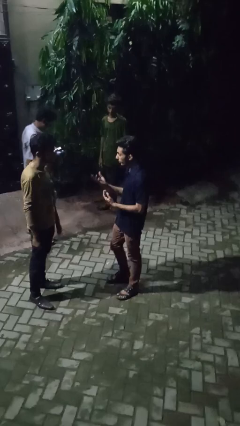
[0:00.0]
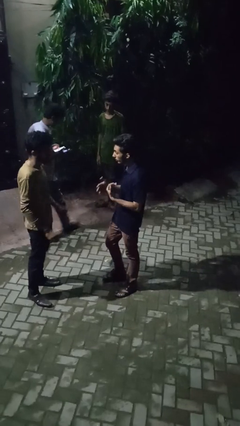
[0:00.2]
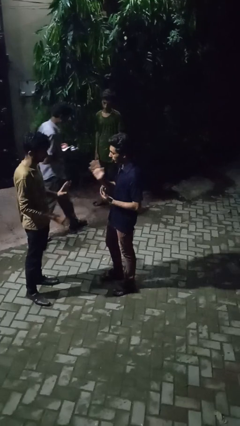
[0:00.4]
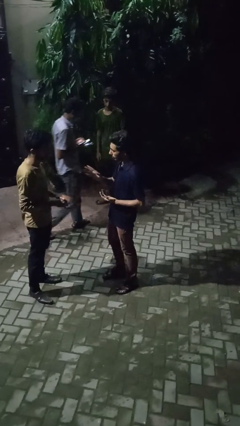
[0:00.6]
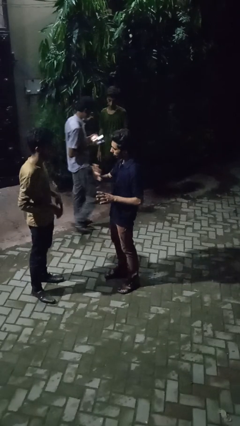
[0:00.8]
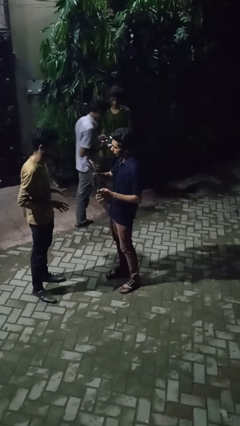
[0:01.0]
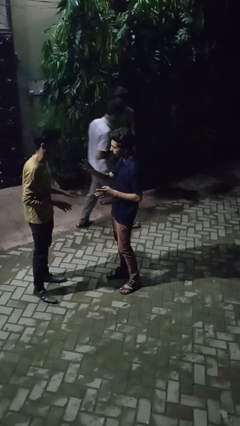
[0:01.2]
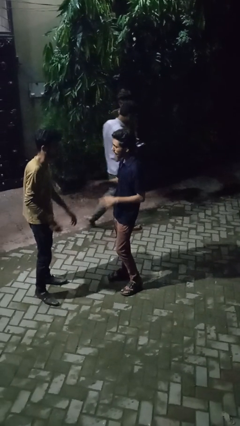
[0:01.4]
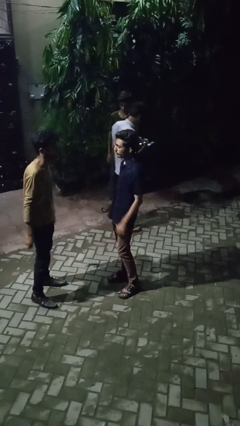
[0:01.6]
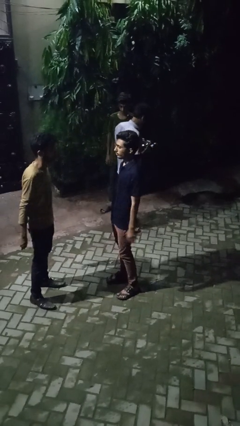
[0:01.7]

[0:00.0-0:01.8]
person talks to person

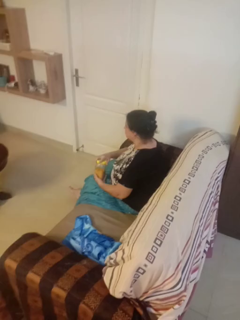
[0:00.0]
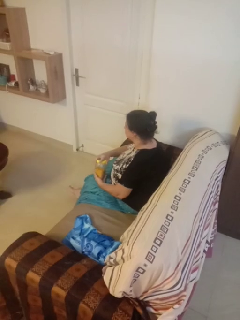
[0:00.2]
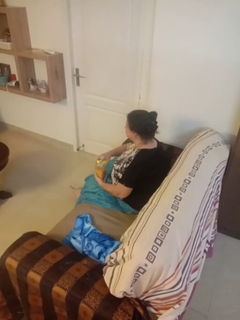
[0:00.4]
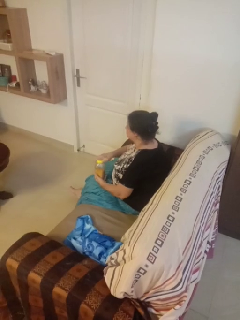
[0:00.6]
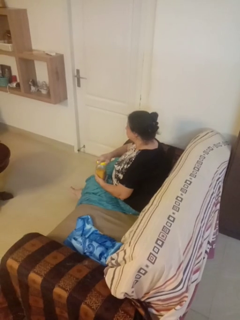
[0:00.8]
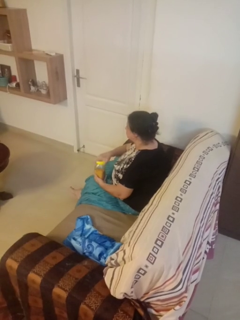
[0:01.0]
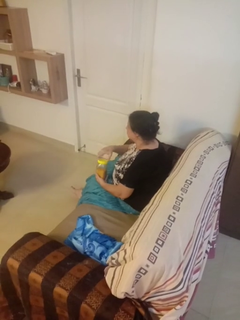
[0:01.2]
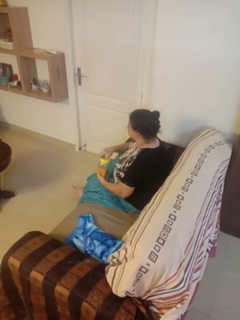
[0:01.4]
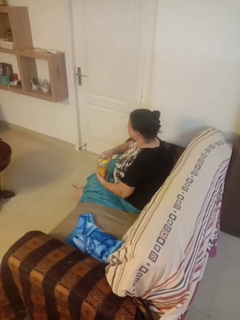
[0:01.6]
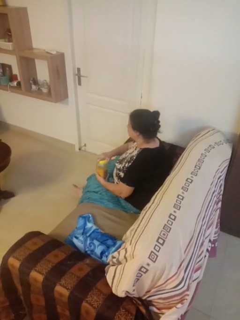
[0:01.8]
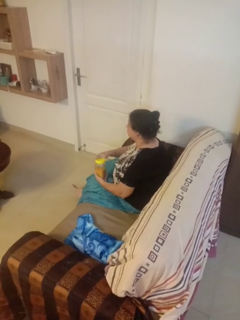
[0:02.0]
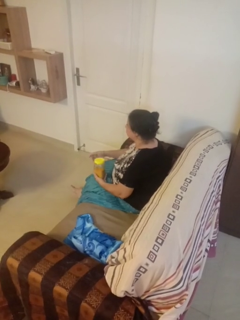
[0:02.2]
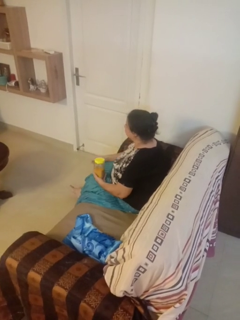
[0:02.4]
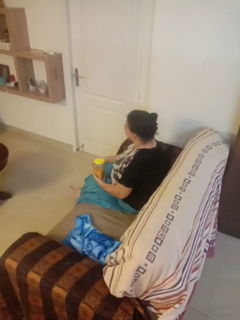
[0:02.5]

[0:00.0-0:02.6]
person closes jar

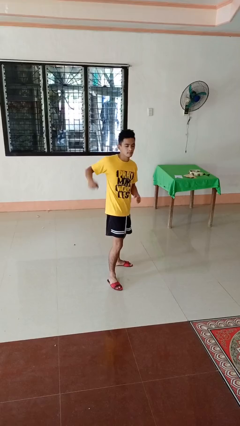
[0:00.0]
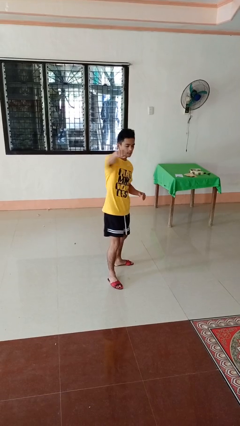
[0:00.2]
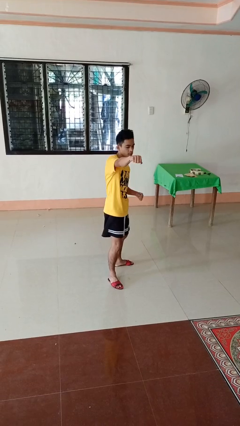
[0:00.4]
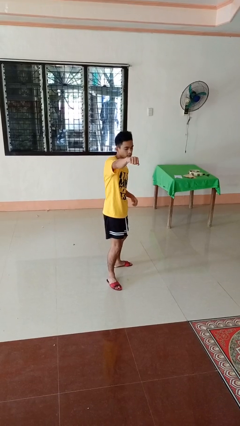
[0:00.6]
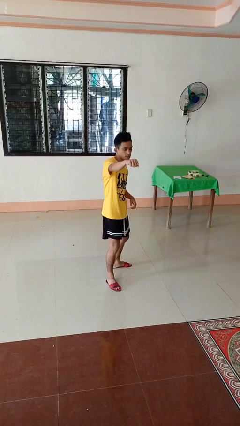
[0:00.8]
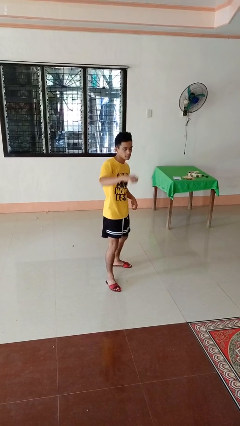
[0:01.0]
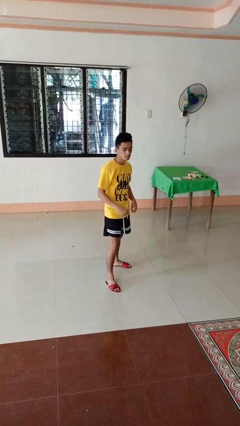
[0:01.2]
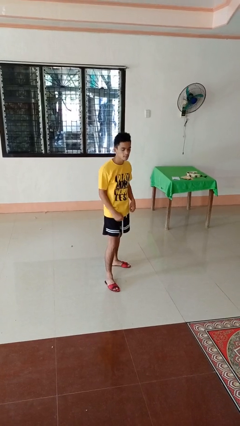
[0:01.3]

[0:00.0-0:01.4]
person punches

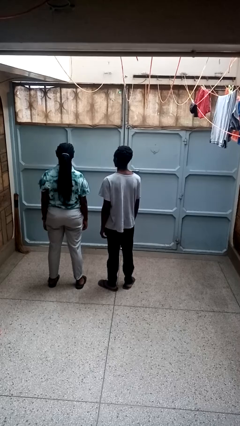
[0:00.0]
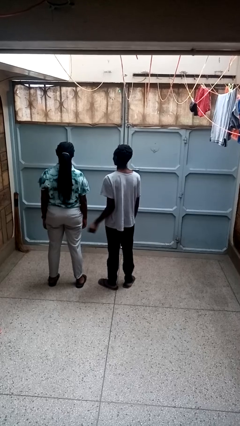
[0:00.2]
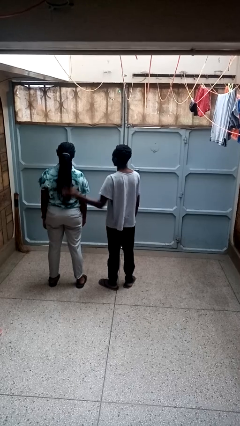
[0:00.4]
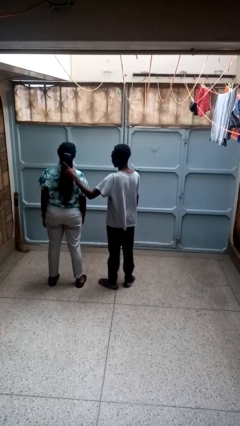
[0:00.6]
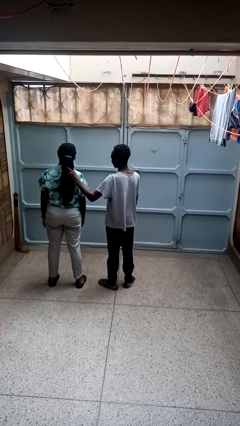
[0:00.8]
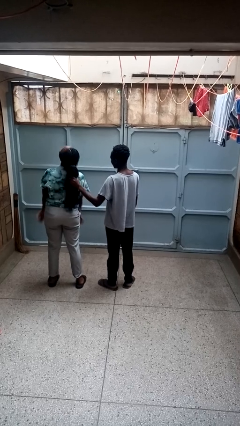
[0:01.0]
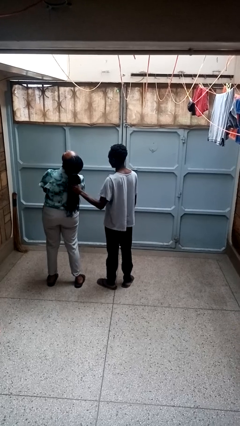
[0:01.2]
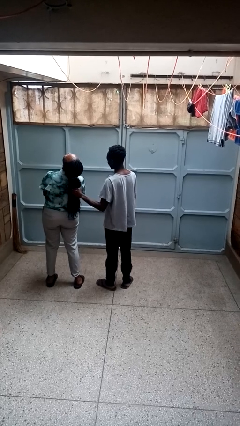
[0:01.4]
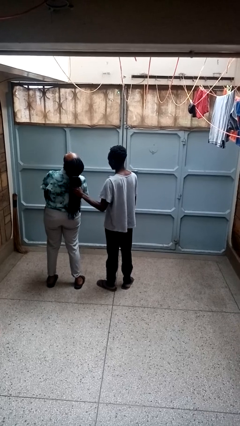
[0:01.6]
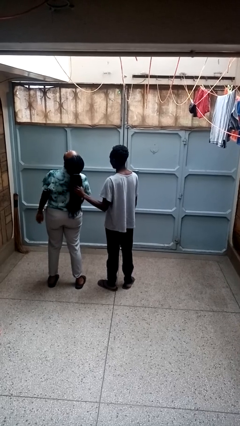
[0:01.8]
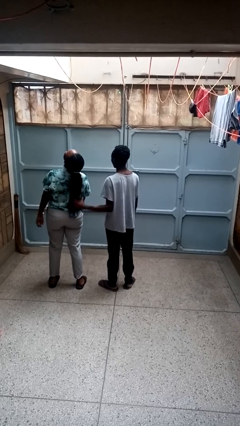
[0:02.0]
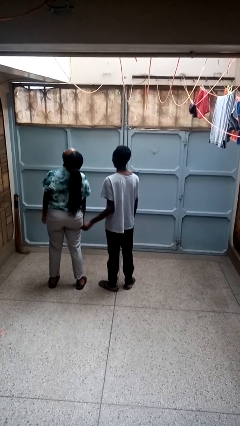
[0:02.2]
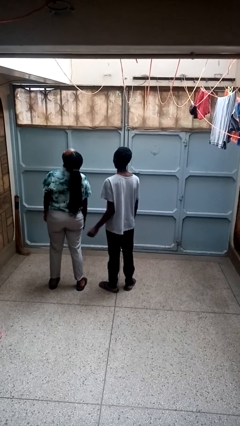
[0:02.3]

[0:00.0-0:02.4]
person grabs person by hair

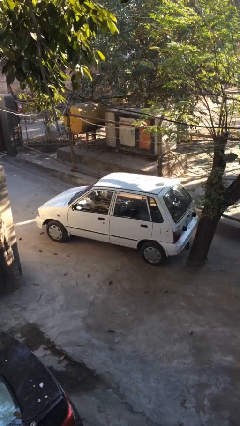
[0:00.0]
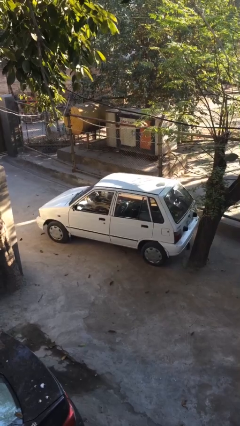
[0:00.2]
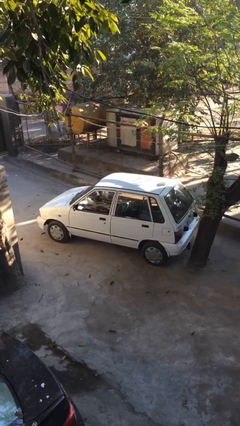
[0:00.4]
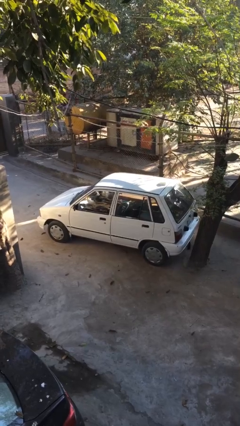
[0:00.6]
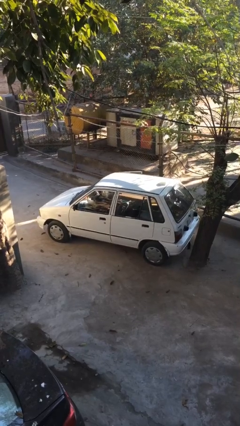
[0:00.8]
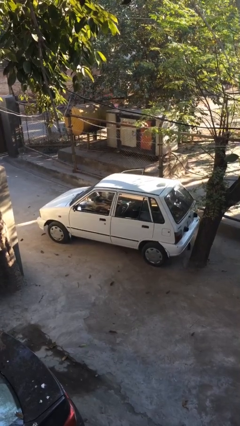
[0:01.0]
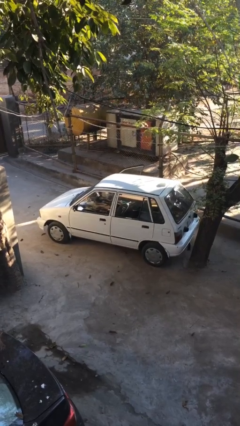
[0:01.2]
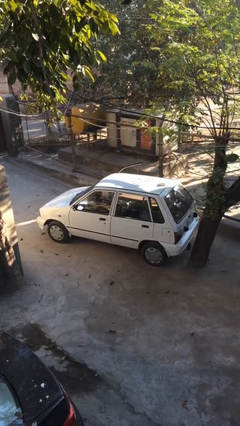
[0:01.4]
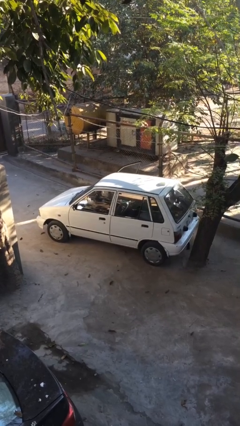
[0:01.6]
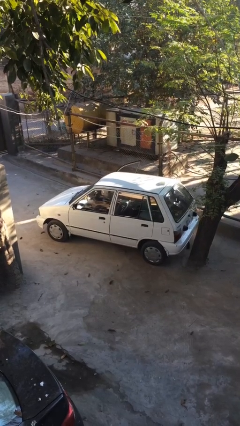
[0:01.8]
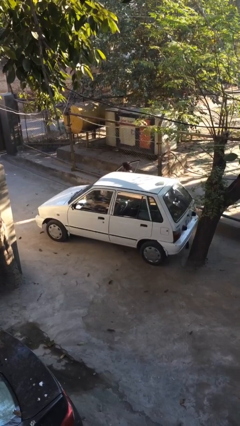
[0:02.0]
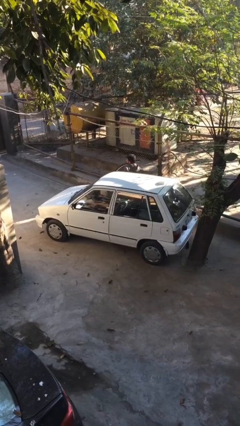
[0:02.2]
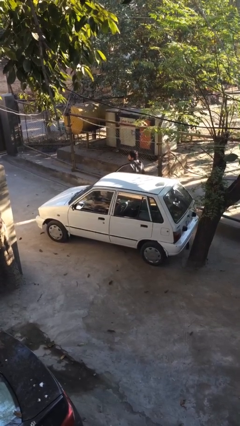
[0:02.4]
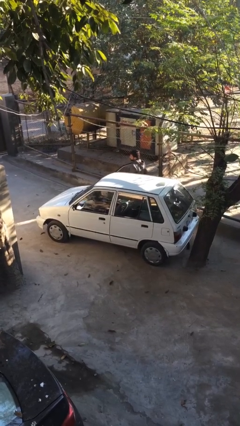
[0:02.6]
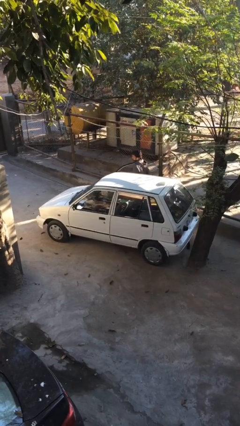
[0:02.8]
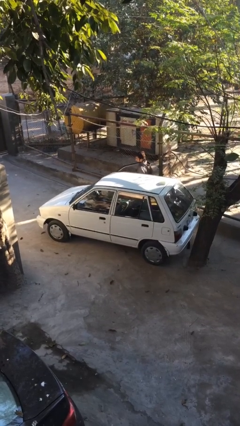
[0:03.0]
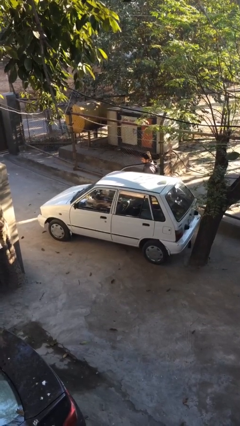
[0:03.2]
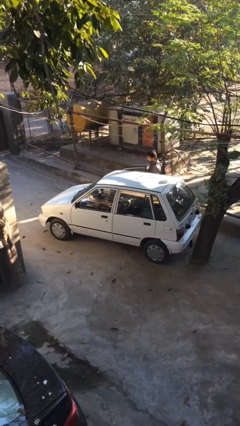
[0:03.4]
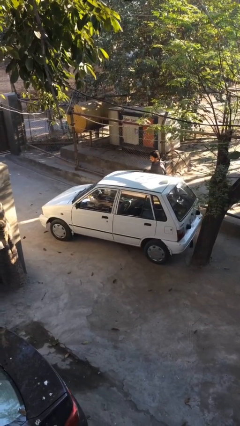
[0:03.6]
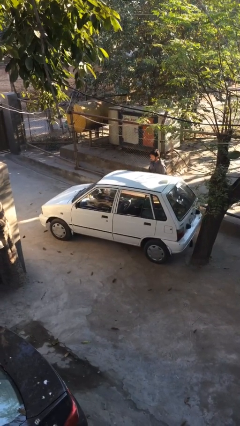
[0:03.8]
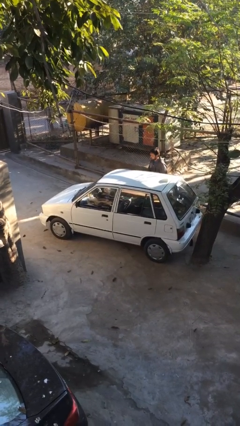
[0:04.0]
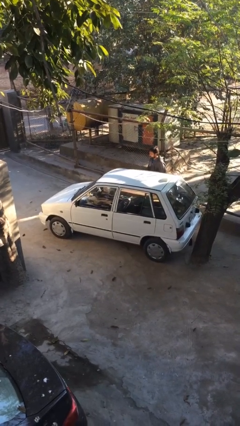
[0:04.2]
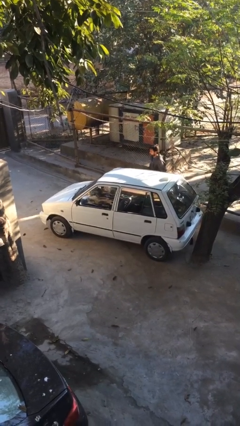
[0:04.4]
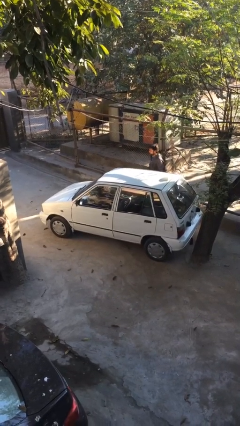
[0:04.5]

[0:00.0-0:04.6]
car drops off person

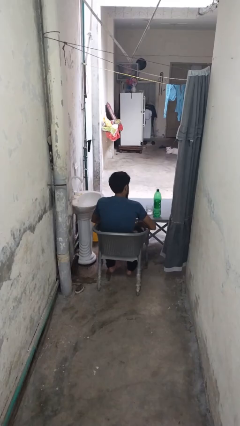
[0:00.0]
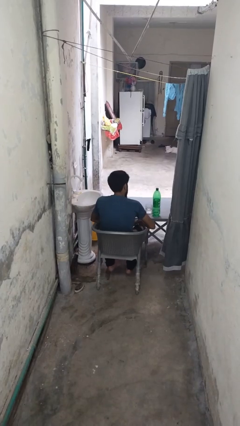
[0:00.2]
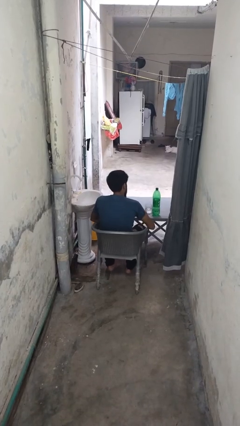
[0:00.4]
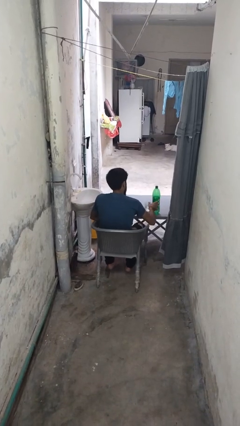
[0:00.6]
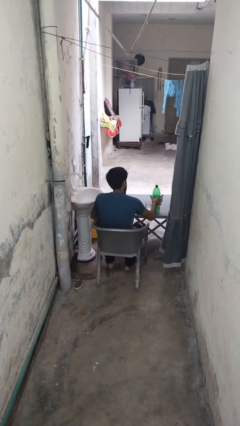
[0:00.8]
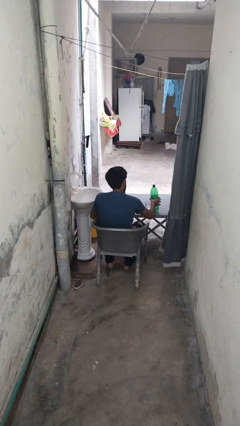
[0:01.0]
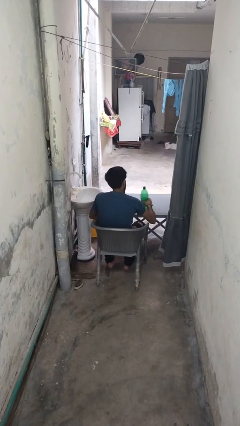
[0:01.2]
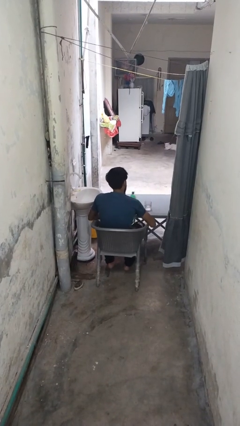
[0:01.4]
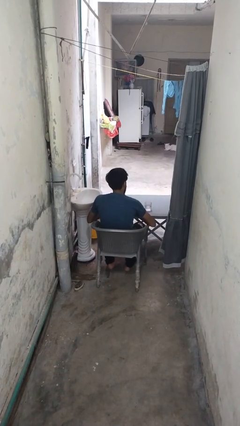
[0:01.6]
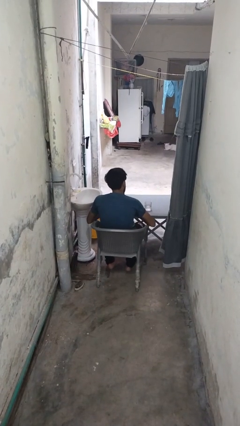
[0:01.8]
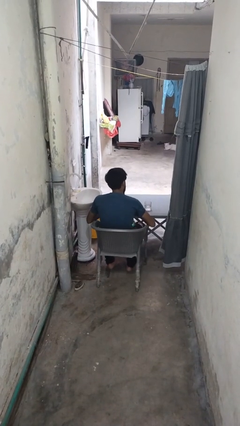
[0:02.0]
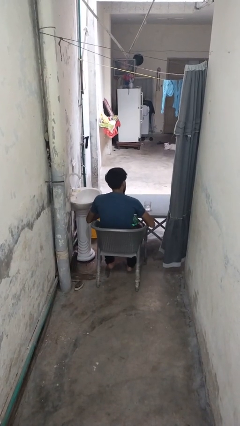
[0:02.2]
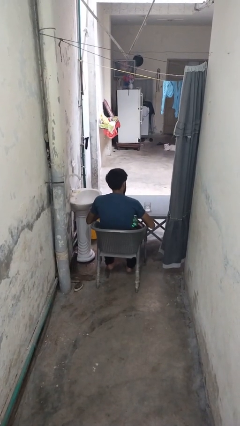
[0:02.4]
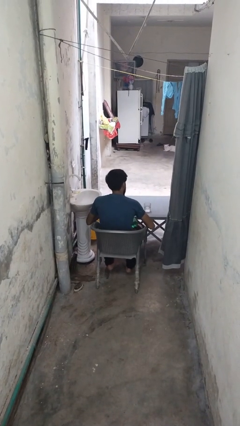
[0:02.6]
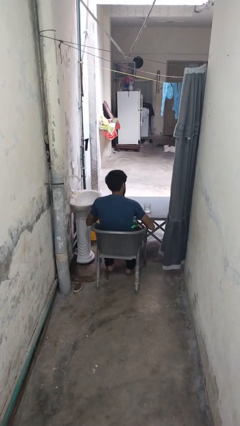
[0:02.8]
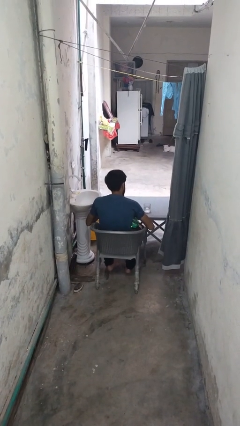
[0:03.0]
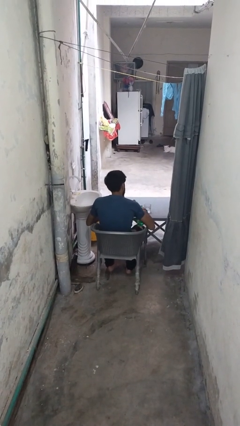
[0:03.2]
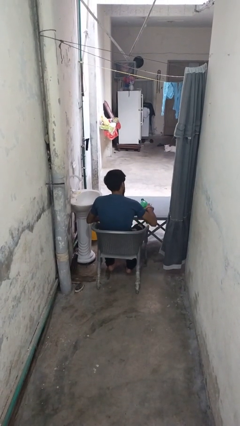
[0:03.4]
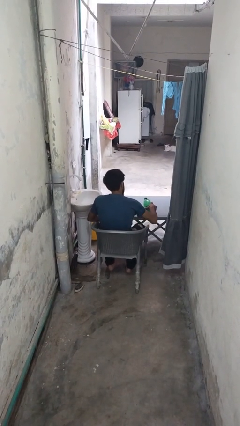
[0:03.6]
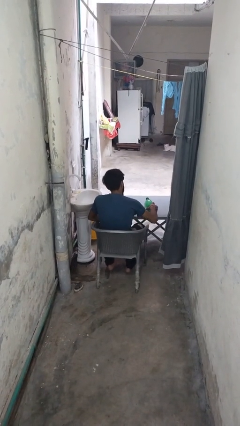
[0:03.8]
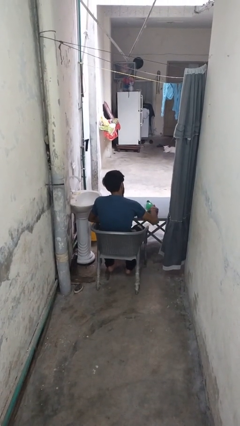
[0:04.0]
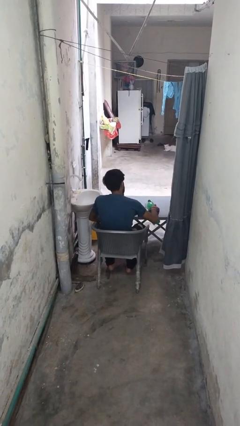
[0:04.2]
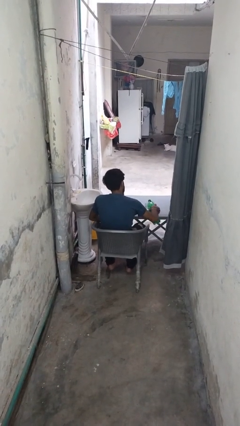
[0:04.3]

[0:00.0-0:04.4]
person unscrews lid from bottle

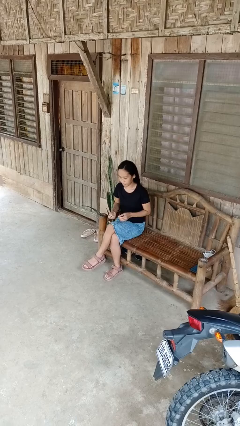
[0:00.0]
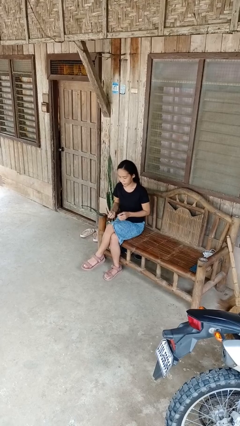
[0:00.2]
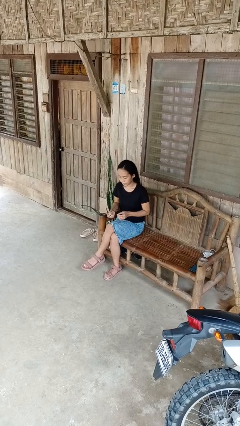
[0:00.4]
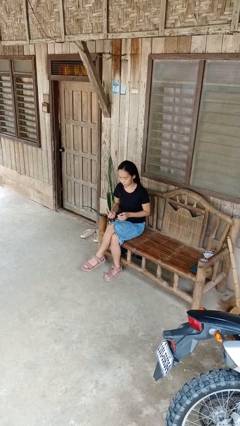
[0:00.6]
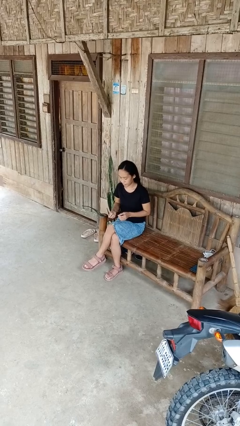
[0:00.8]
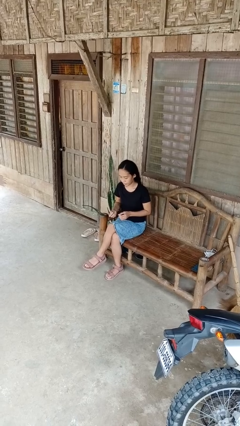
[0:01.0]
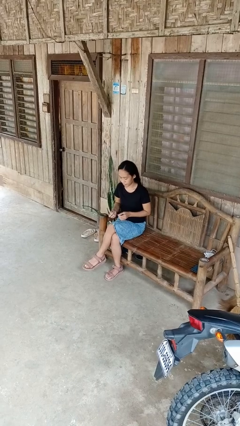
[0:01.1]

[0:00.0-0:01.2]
person takes off ring
